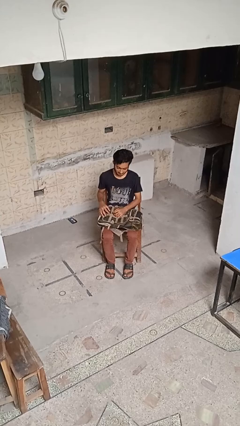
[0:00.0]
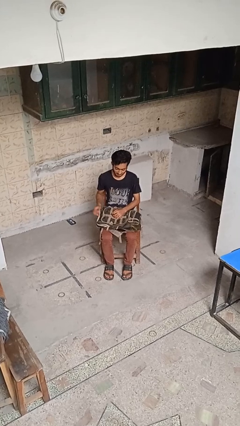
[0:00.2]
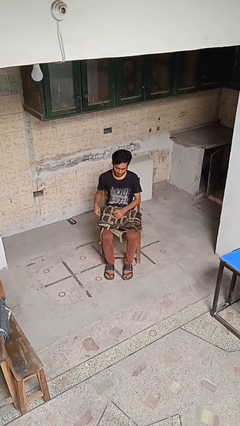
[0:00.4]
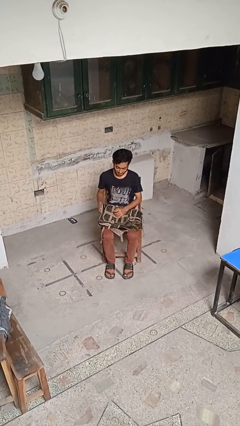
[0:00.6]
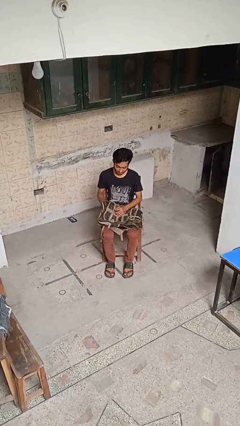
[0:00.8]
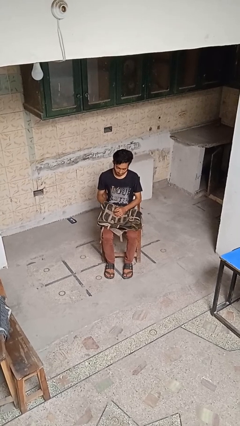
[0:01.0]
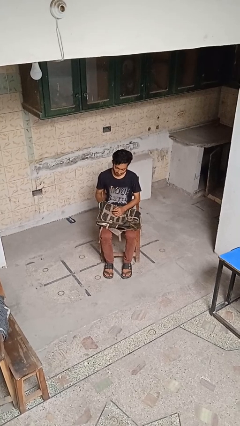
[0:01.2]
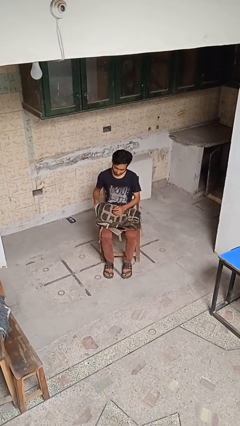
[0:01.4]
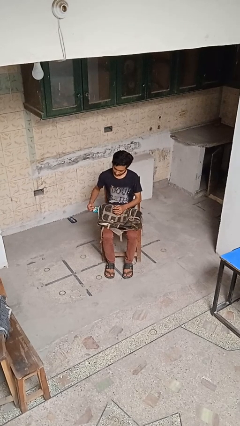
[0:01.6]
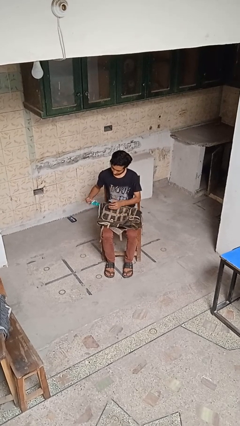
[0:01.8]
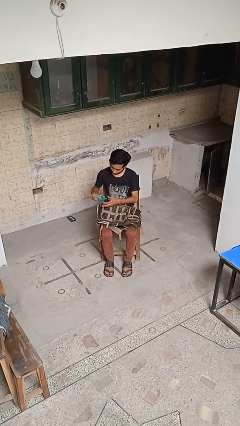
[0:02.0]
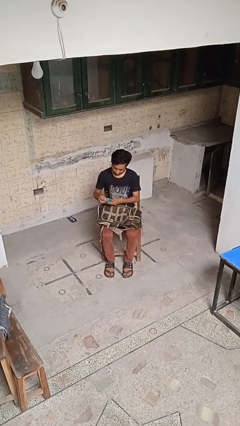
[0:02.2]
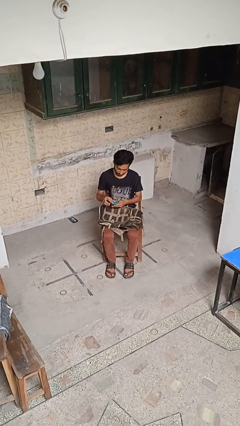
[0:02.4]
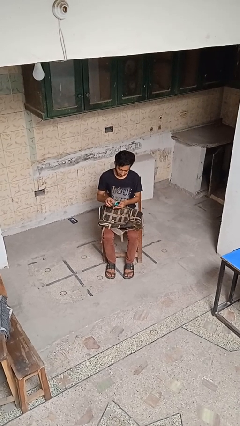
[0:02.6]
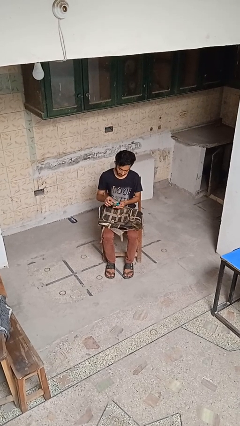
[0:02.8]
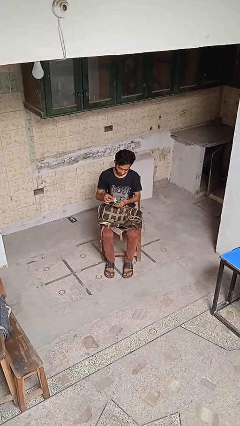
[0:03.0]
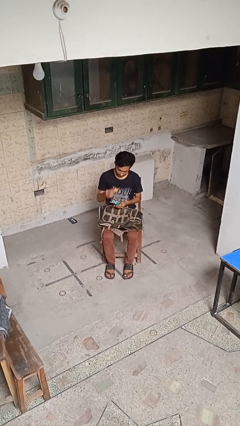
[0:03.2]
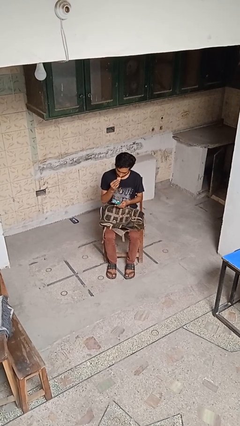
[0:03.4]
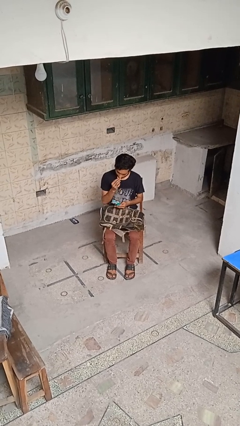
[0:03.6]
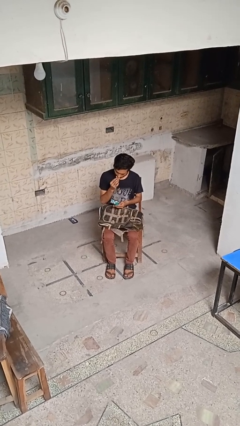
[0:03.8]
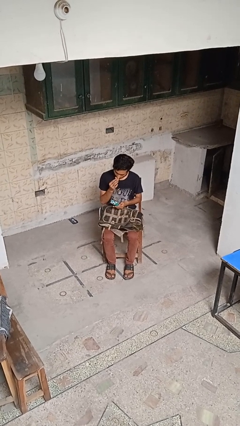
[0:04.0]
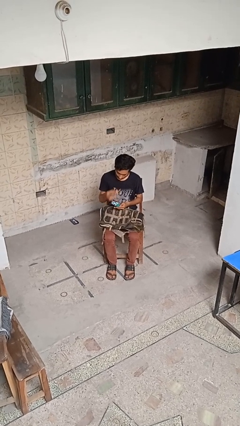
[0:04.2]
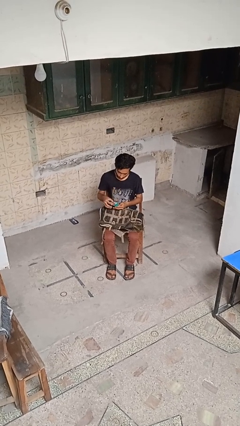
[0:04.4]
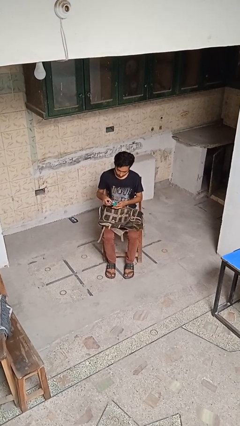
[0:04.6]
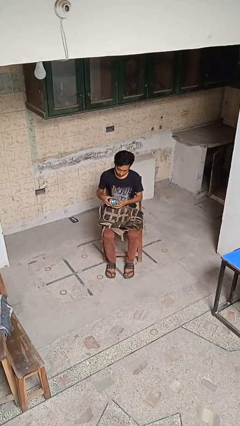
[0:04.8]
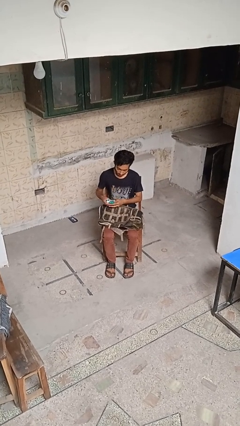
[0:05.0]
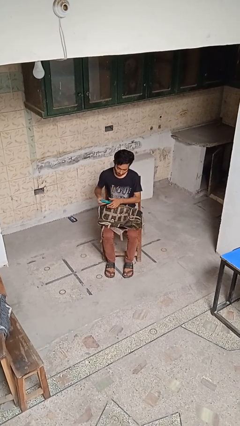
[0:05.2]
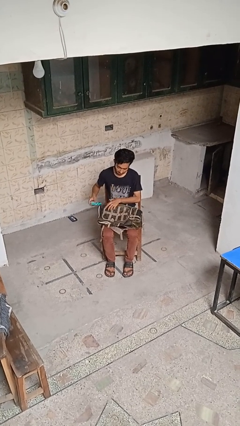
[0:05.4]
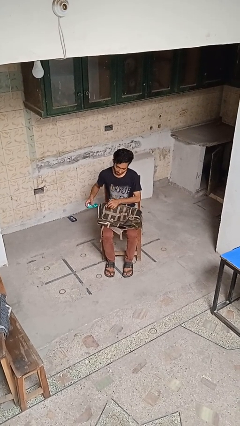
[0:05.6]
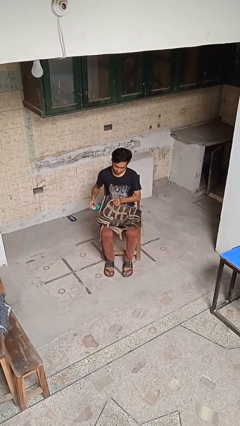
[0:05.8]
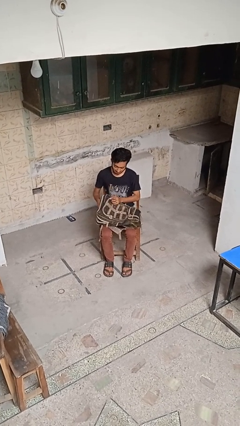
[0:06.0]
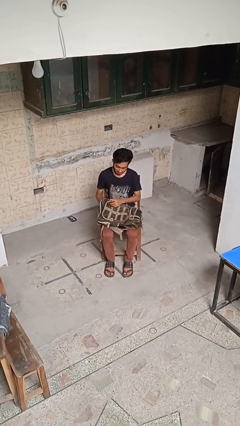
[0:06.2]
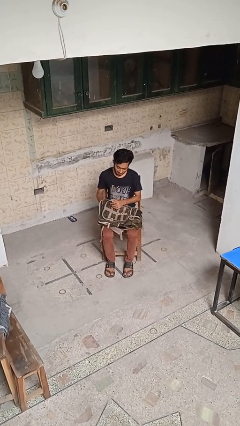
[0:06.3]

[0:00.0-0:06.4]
person eats snack from bag

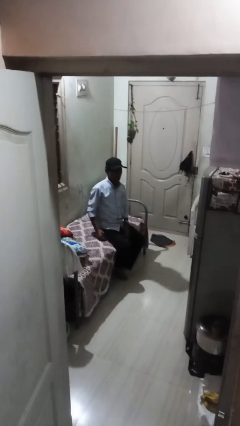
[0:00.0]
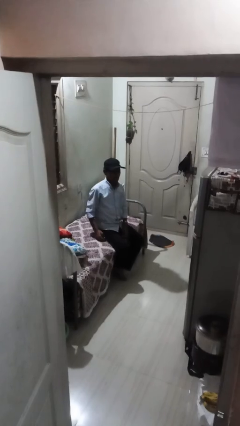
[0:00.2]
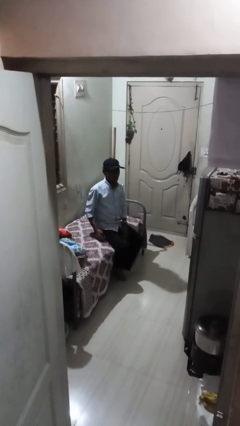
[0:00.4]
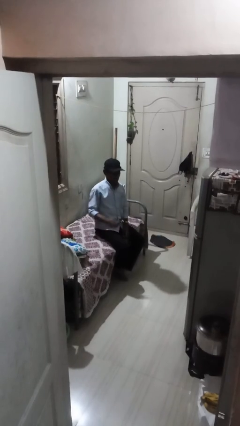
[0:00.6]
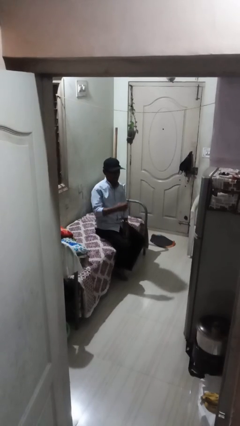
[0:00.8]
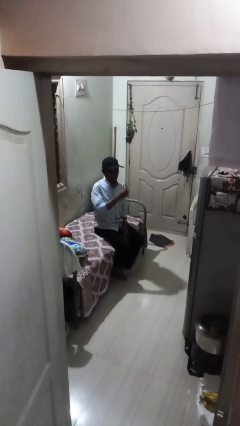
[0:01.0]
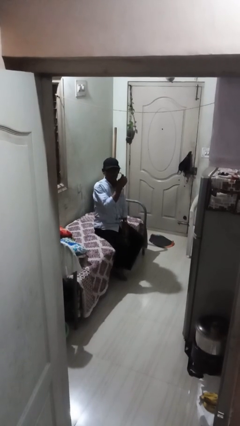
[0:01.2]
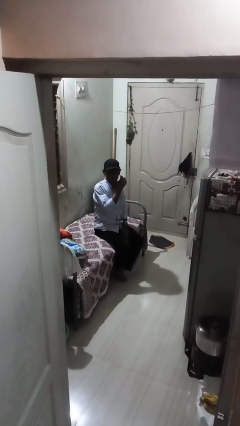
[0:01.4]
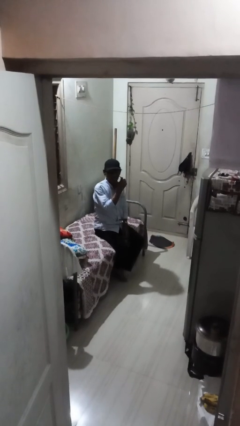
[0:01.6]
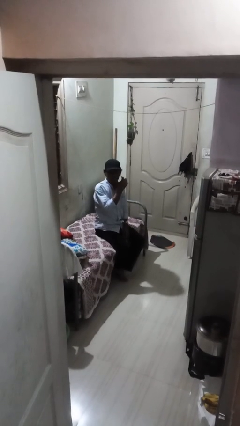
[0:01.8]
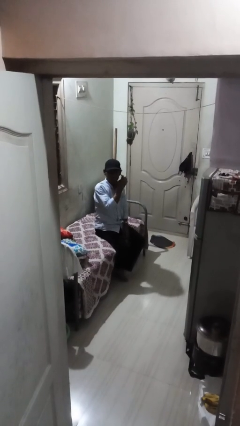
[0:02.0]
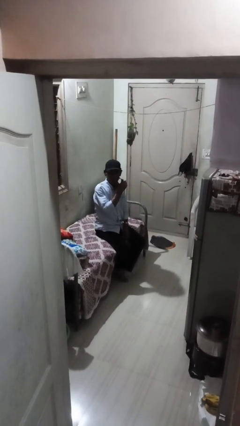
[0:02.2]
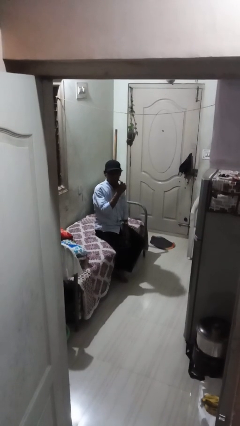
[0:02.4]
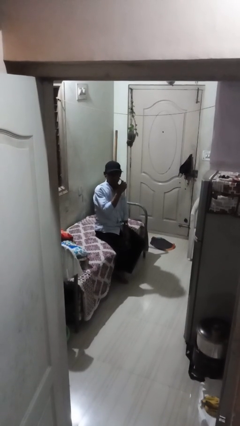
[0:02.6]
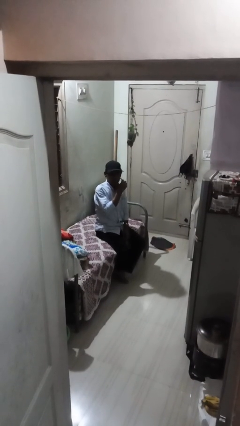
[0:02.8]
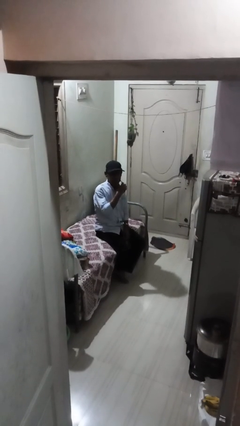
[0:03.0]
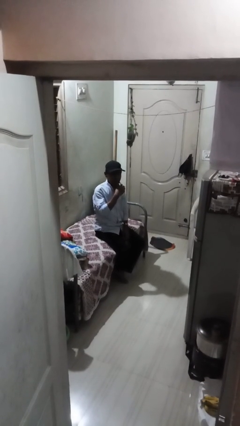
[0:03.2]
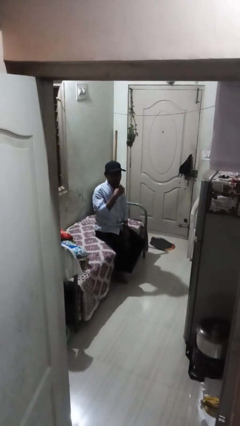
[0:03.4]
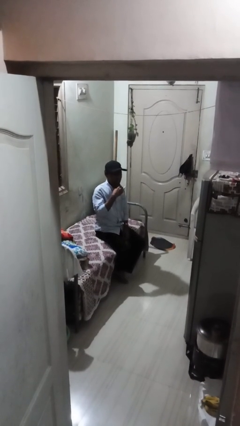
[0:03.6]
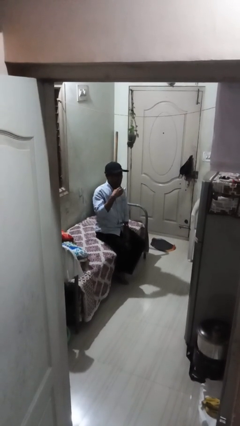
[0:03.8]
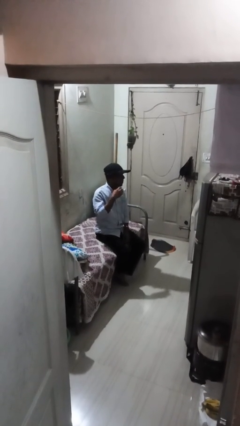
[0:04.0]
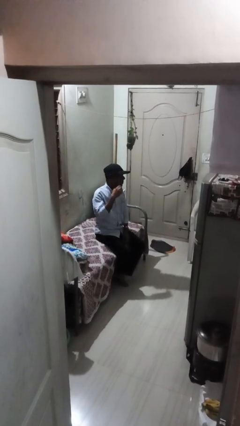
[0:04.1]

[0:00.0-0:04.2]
person shaves face

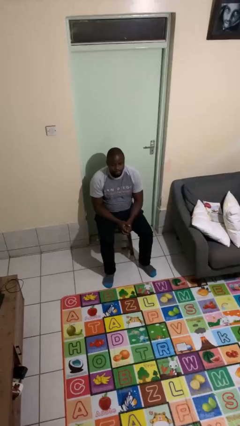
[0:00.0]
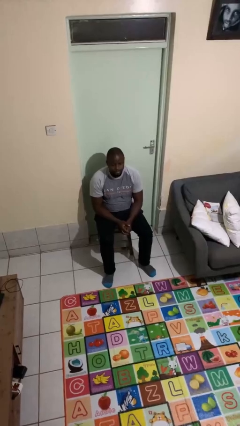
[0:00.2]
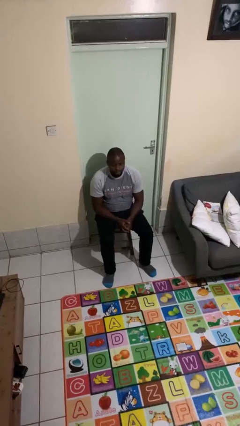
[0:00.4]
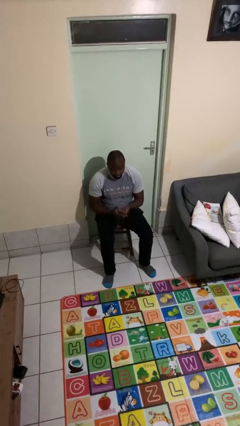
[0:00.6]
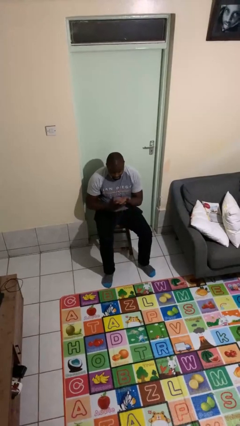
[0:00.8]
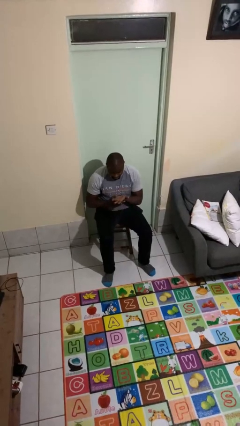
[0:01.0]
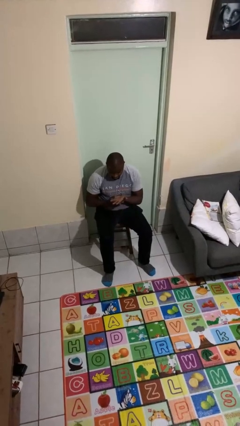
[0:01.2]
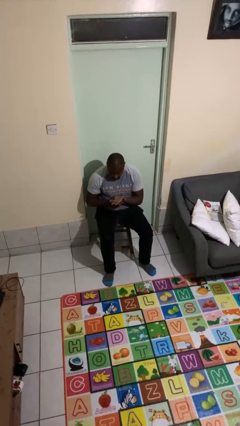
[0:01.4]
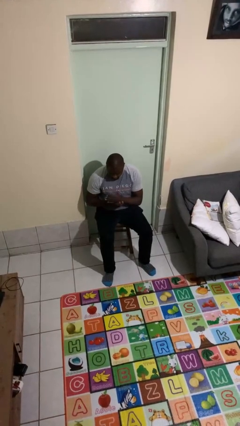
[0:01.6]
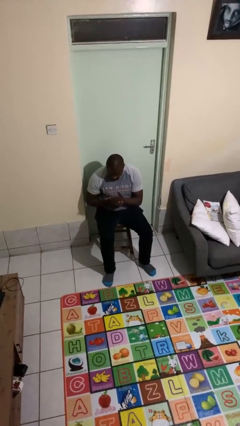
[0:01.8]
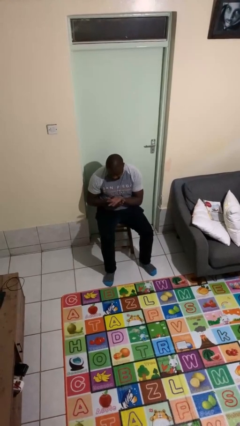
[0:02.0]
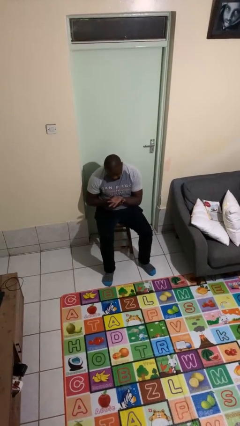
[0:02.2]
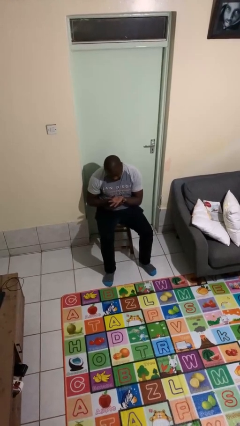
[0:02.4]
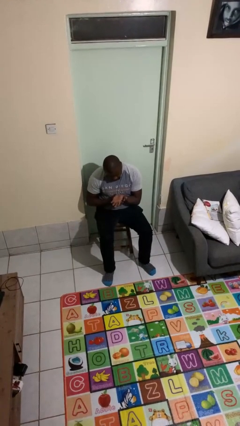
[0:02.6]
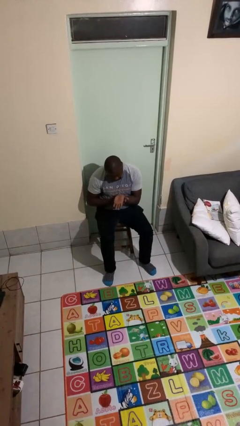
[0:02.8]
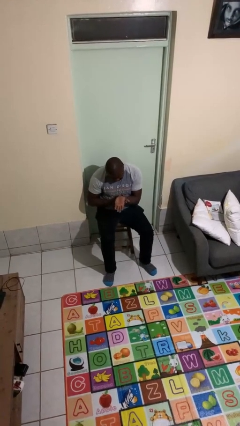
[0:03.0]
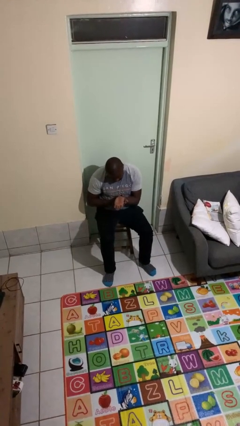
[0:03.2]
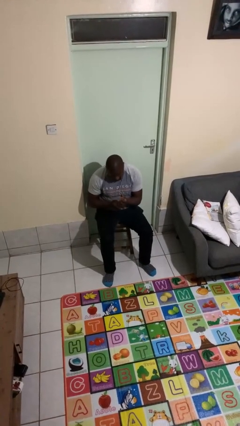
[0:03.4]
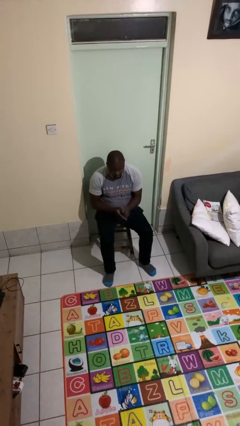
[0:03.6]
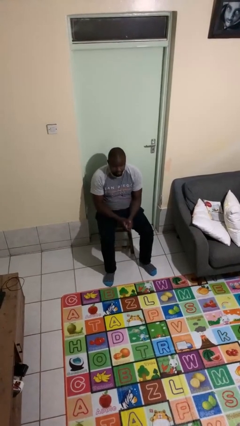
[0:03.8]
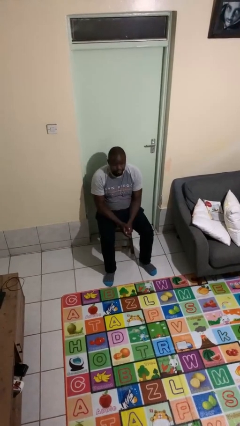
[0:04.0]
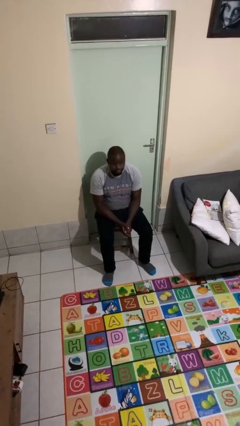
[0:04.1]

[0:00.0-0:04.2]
person looks at hands in lap

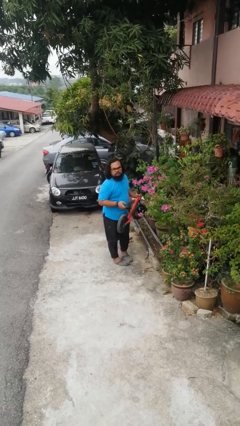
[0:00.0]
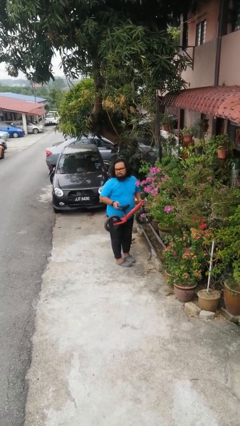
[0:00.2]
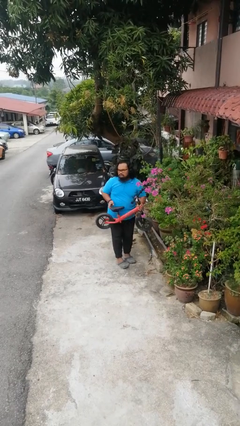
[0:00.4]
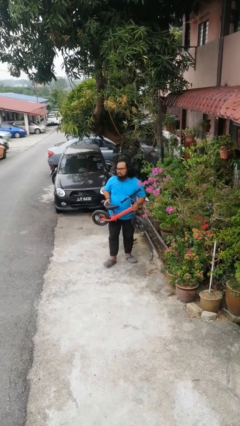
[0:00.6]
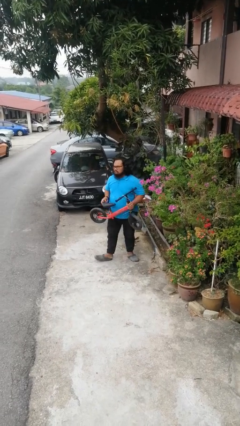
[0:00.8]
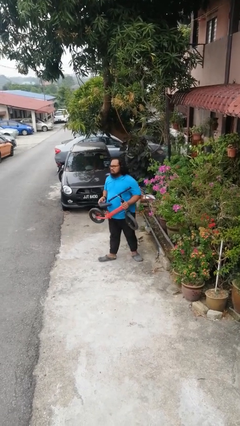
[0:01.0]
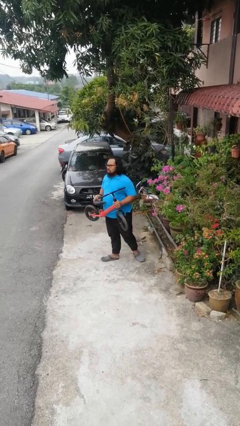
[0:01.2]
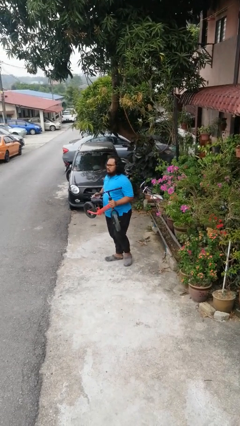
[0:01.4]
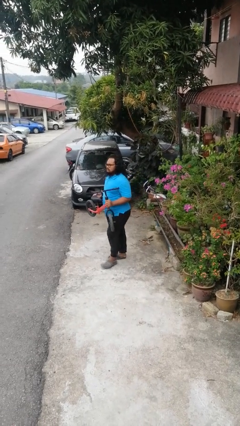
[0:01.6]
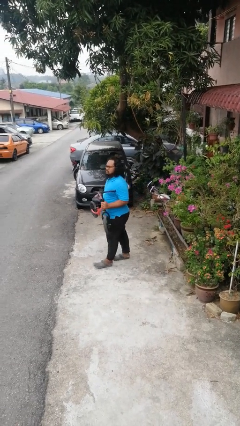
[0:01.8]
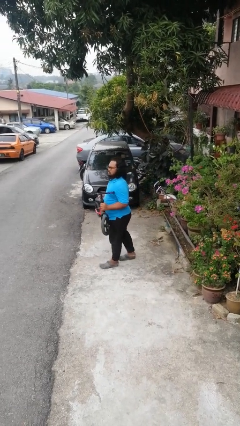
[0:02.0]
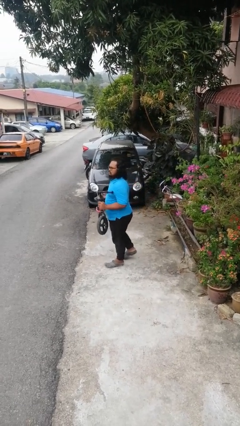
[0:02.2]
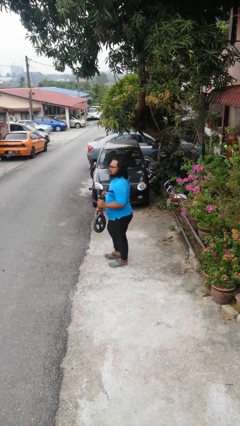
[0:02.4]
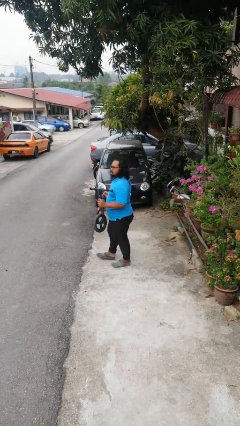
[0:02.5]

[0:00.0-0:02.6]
person carries bicycle

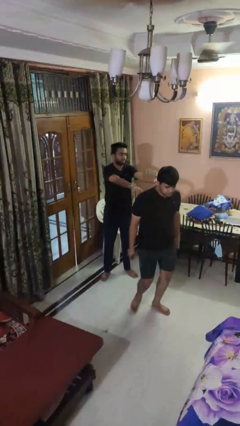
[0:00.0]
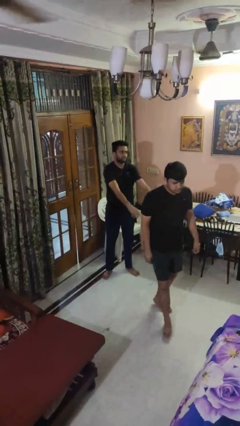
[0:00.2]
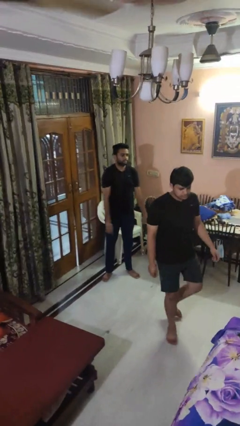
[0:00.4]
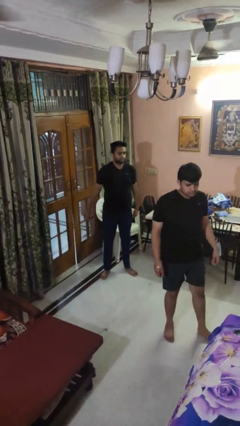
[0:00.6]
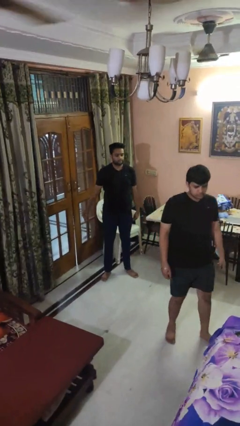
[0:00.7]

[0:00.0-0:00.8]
person shoves person
